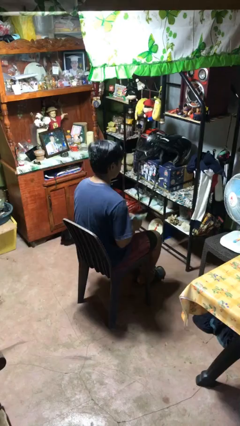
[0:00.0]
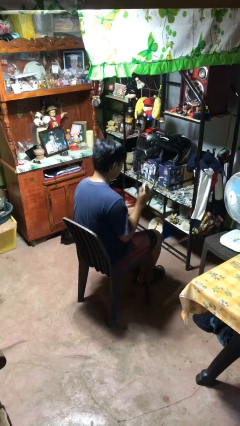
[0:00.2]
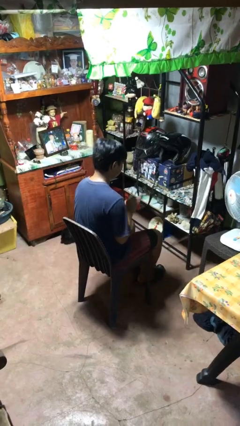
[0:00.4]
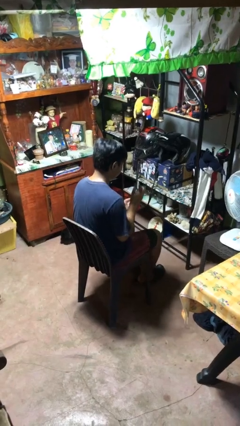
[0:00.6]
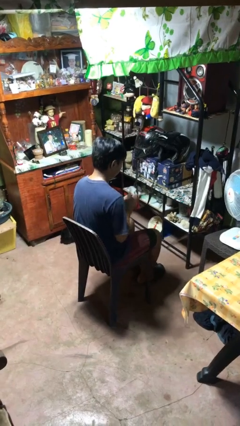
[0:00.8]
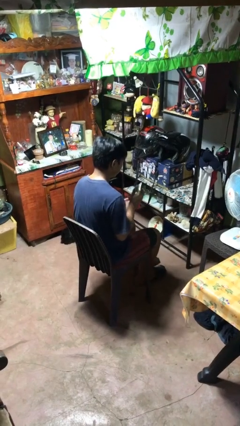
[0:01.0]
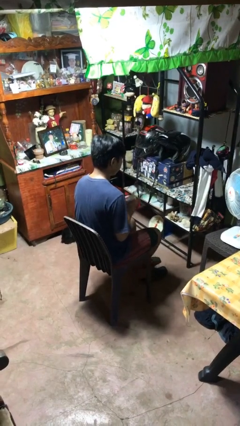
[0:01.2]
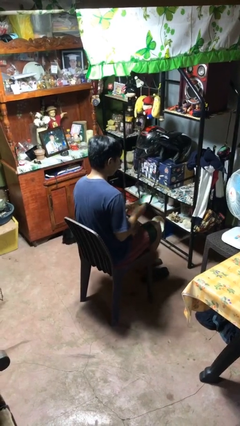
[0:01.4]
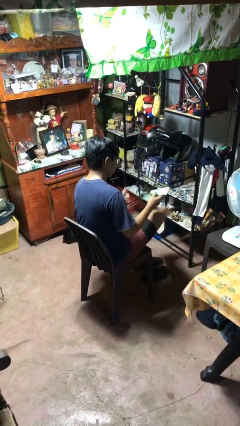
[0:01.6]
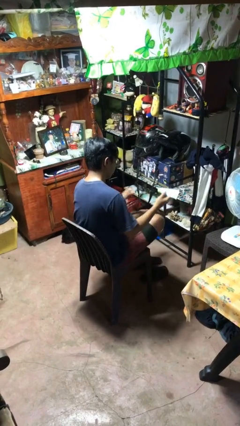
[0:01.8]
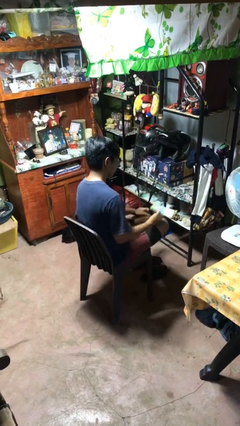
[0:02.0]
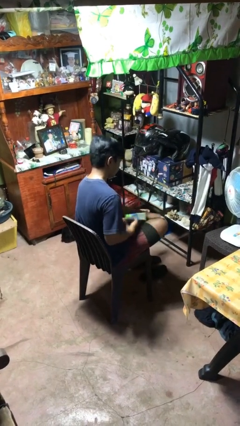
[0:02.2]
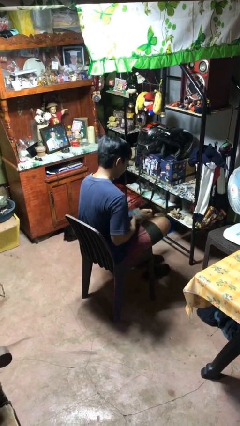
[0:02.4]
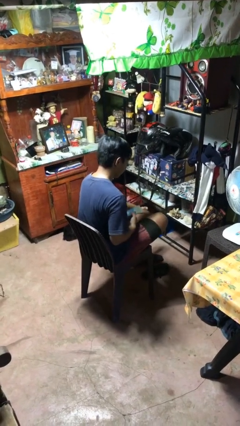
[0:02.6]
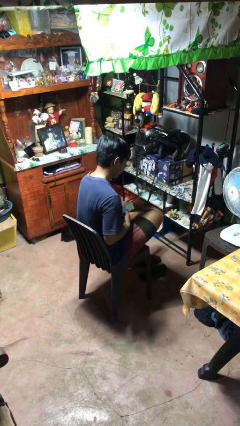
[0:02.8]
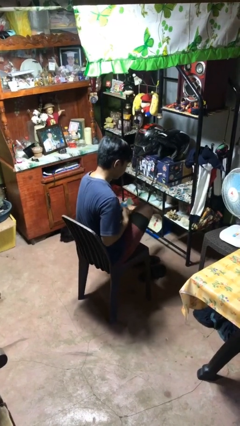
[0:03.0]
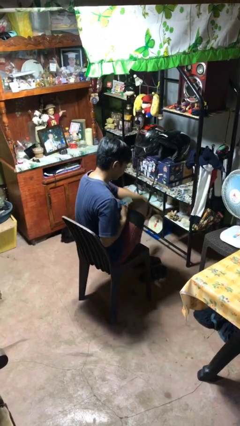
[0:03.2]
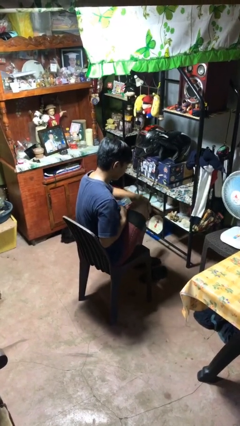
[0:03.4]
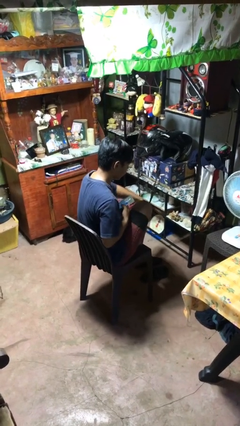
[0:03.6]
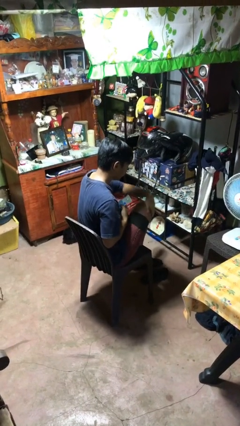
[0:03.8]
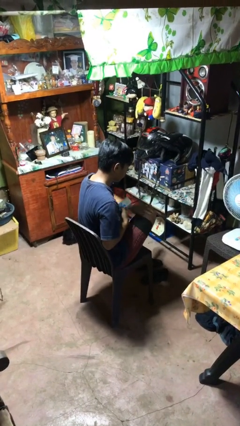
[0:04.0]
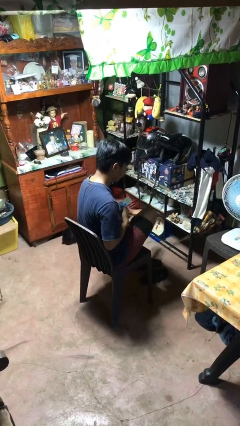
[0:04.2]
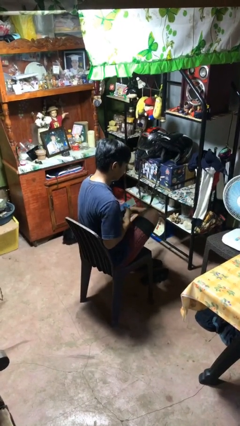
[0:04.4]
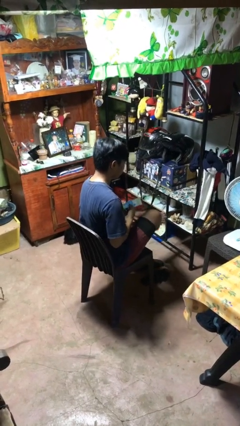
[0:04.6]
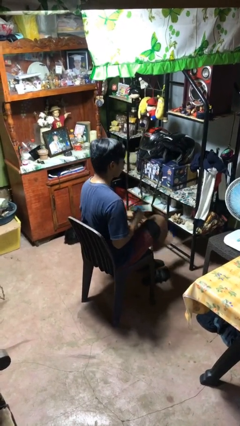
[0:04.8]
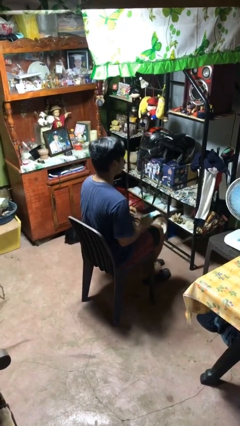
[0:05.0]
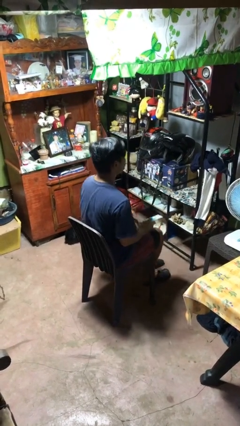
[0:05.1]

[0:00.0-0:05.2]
person applies sunscreen

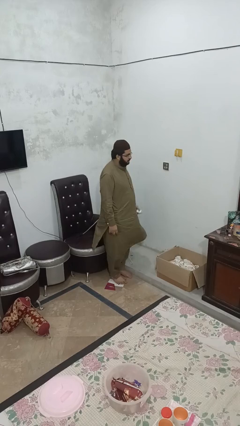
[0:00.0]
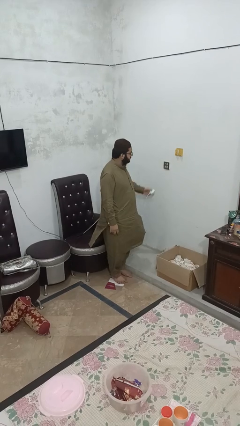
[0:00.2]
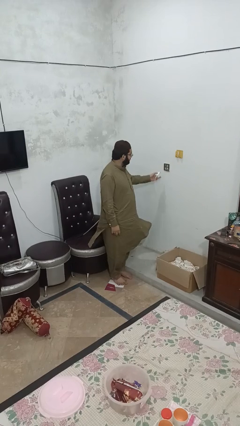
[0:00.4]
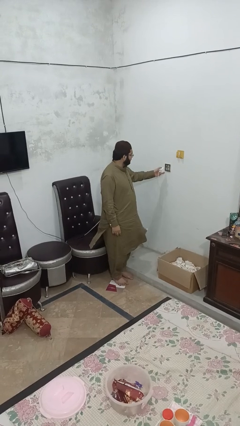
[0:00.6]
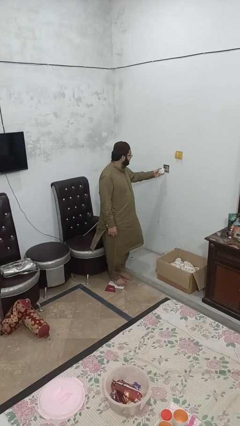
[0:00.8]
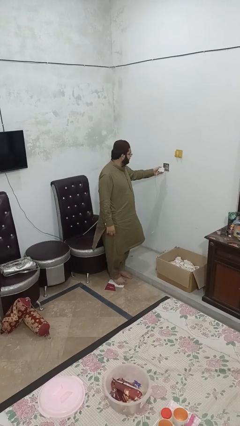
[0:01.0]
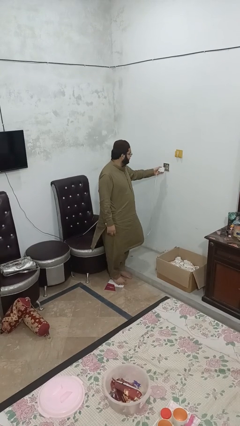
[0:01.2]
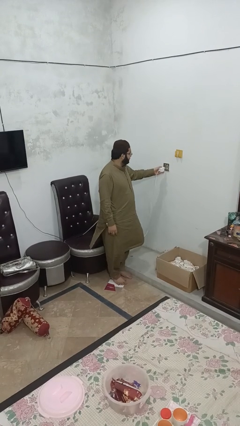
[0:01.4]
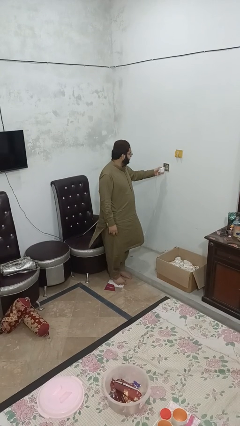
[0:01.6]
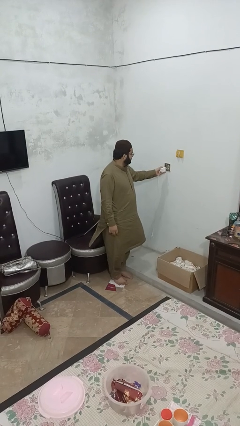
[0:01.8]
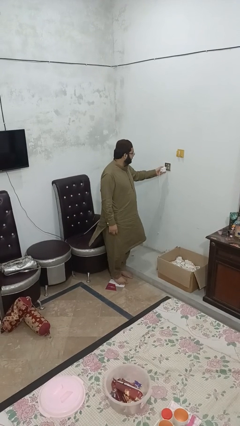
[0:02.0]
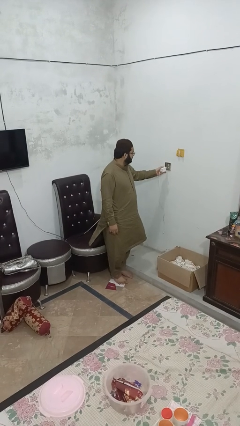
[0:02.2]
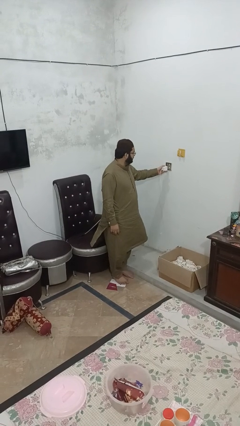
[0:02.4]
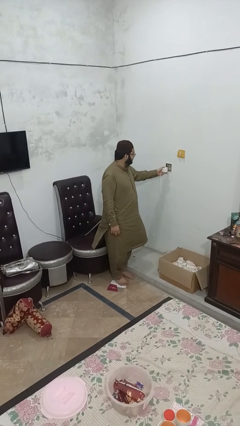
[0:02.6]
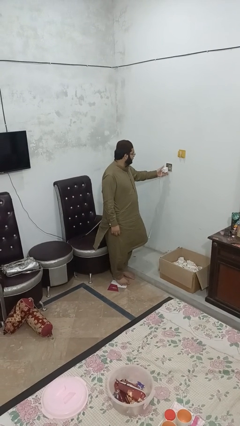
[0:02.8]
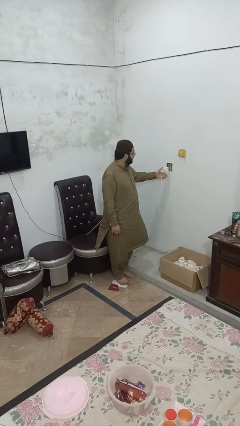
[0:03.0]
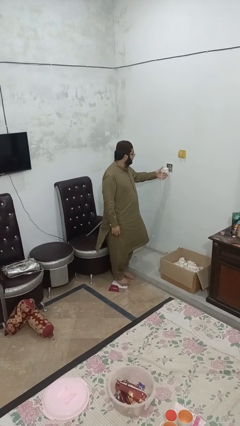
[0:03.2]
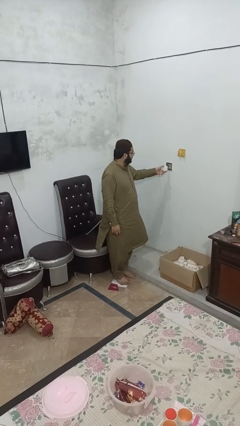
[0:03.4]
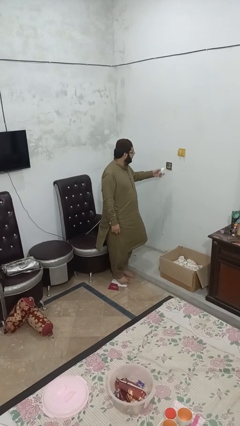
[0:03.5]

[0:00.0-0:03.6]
person plugs into electrical socket

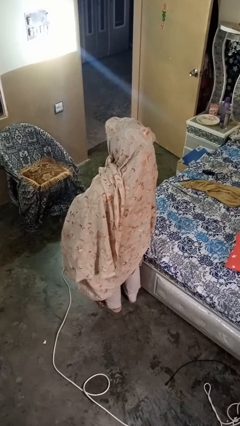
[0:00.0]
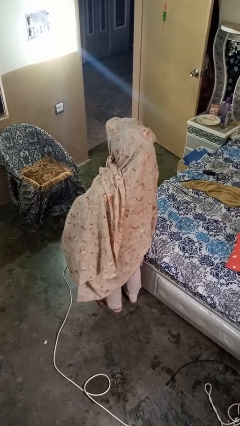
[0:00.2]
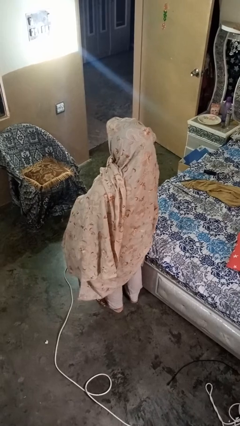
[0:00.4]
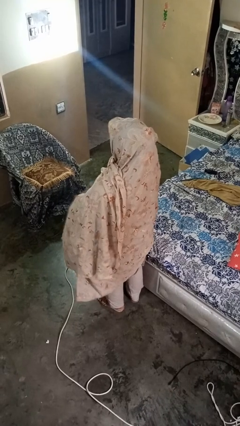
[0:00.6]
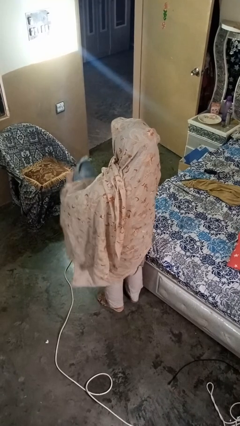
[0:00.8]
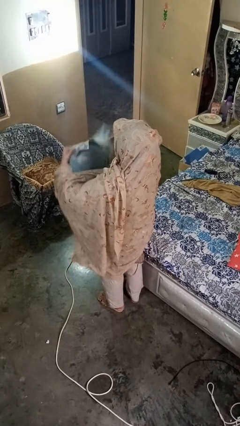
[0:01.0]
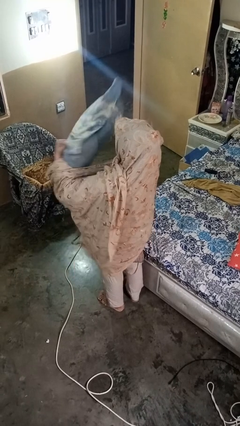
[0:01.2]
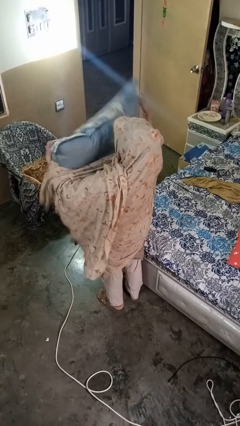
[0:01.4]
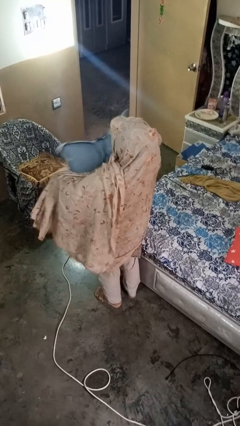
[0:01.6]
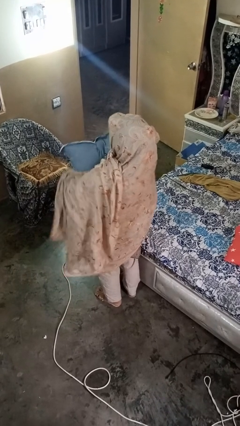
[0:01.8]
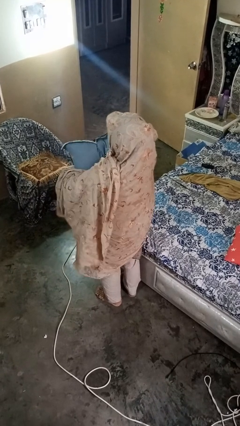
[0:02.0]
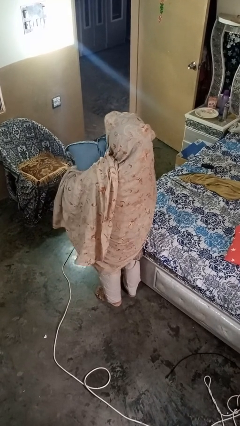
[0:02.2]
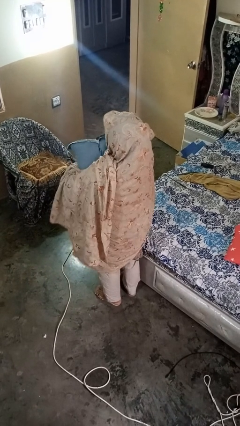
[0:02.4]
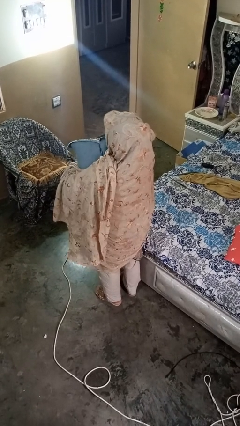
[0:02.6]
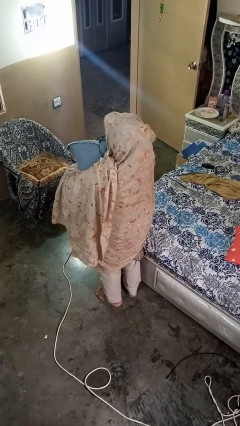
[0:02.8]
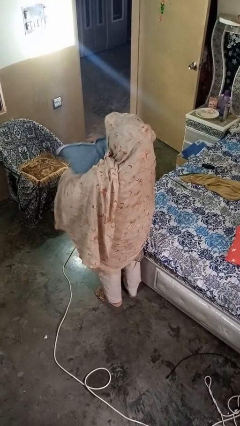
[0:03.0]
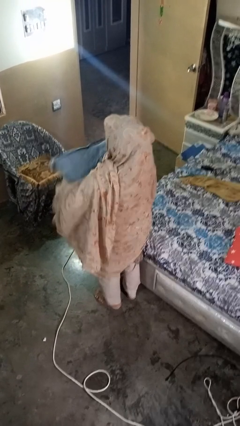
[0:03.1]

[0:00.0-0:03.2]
person squeezes object

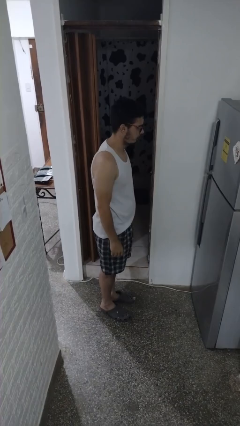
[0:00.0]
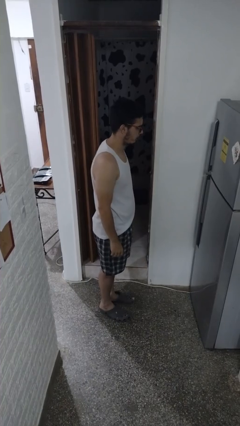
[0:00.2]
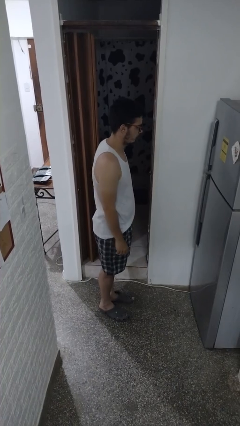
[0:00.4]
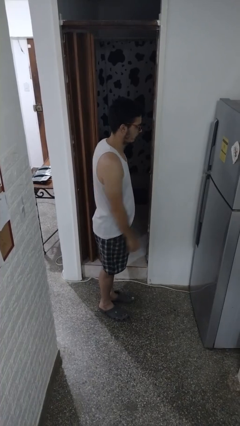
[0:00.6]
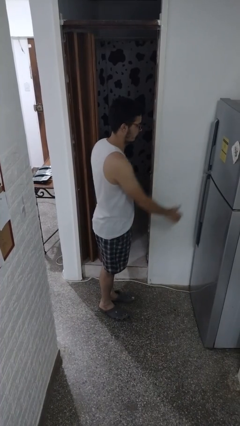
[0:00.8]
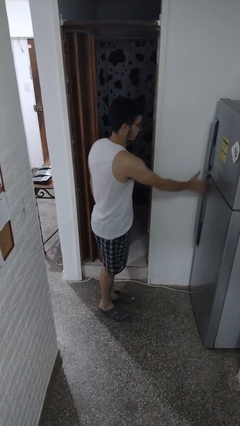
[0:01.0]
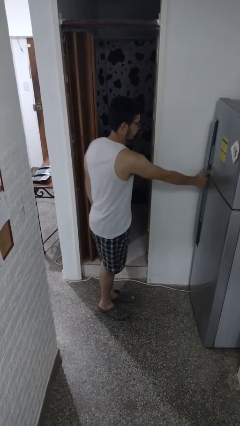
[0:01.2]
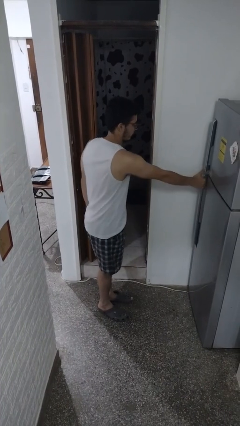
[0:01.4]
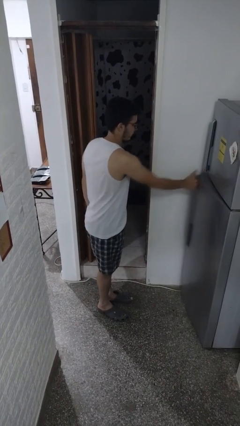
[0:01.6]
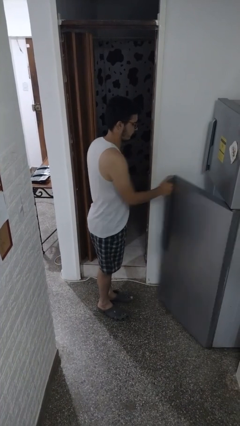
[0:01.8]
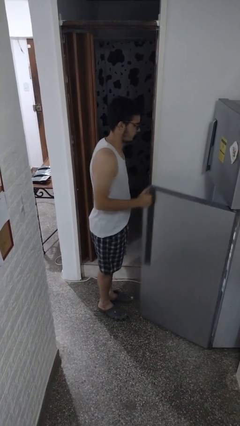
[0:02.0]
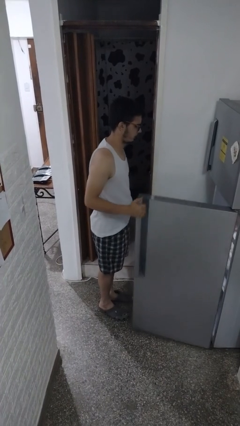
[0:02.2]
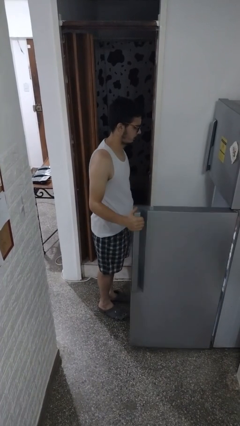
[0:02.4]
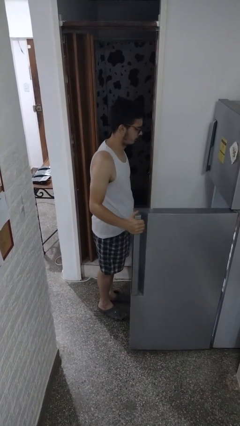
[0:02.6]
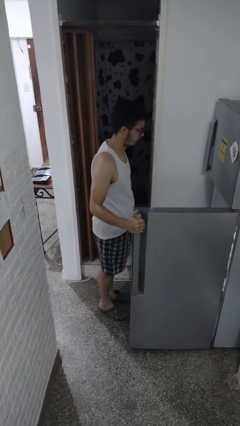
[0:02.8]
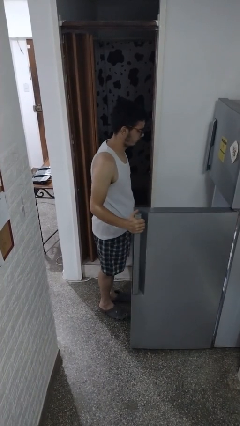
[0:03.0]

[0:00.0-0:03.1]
person opens refrigerator

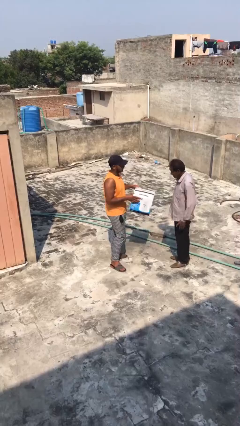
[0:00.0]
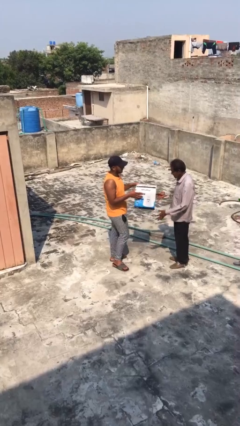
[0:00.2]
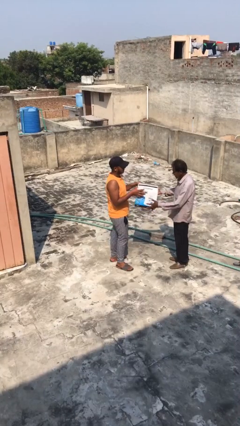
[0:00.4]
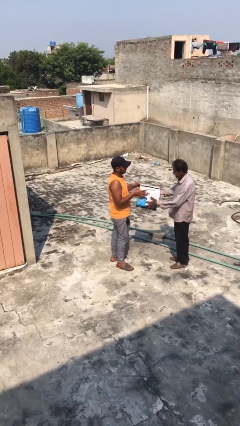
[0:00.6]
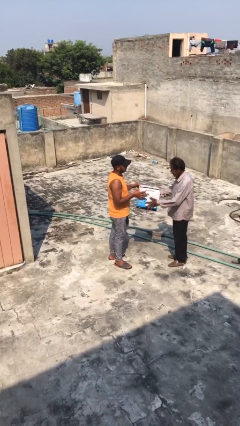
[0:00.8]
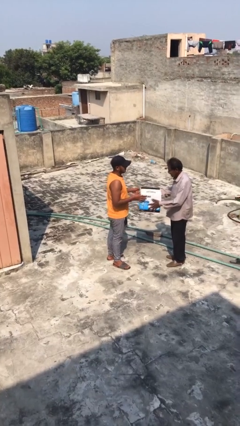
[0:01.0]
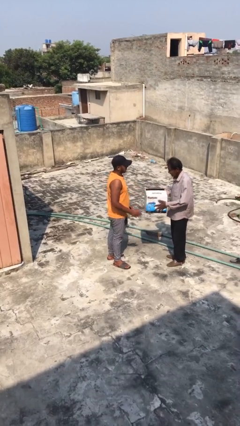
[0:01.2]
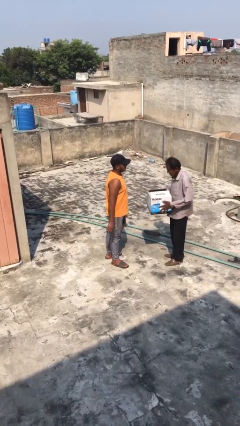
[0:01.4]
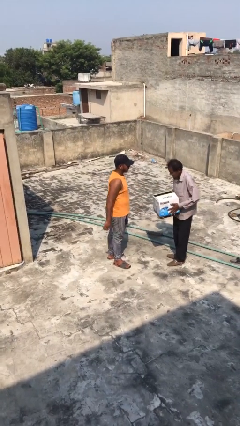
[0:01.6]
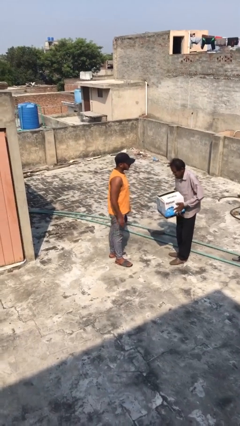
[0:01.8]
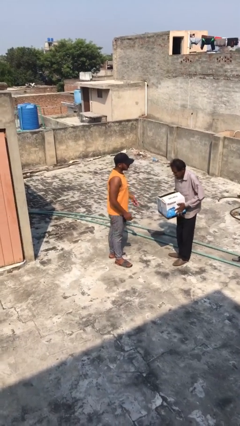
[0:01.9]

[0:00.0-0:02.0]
person transfers object to person

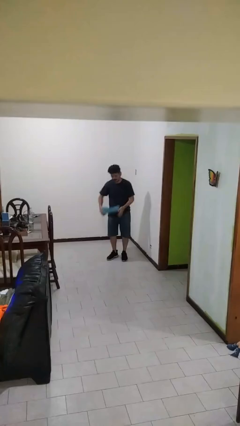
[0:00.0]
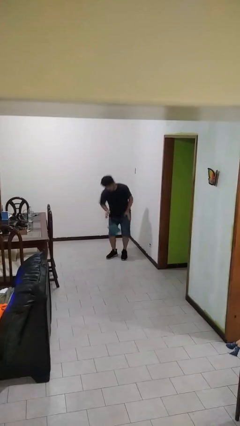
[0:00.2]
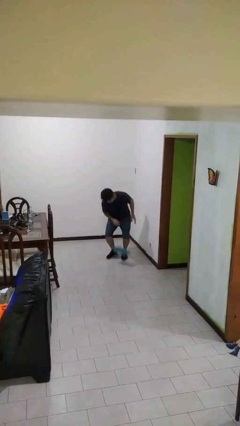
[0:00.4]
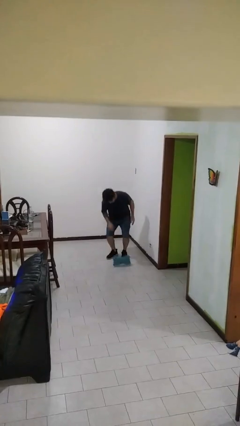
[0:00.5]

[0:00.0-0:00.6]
person drops object
